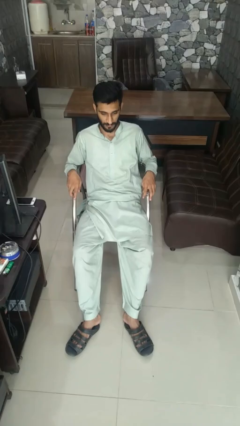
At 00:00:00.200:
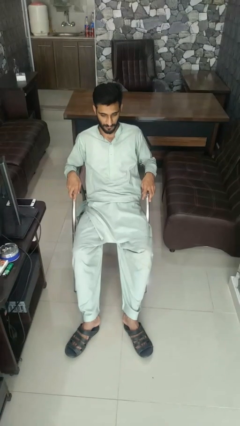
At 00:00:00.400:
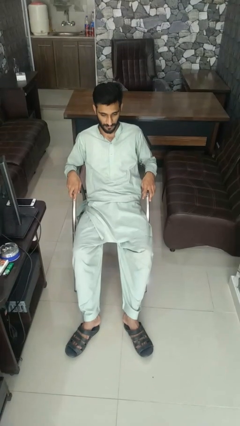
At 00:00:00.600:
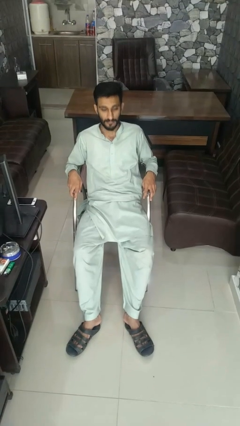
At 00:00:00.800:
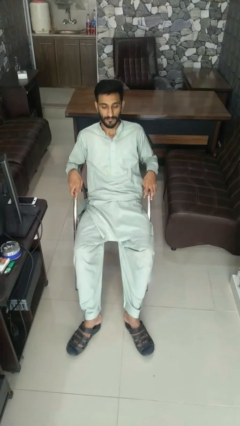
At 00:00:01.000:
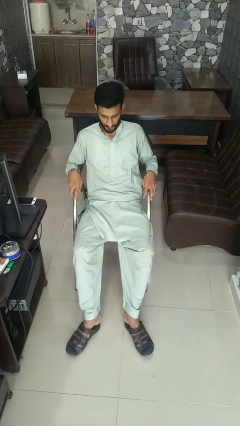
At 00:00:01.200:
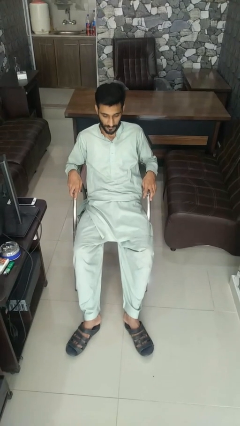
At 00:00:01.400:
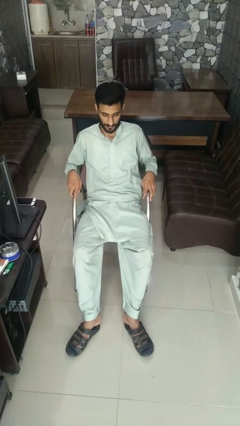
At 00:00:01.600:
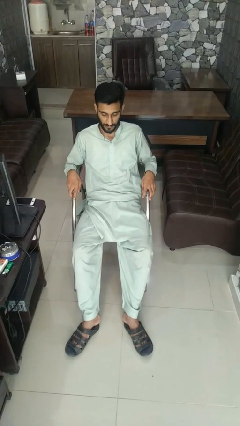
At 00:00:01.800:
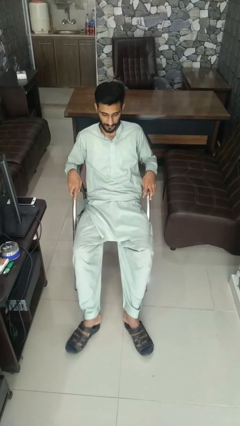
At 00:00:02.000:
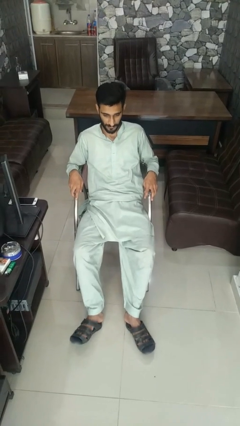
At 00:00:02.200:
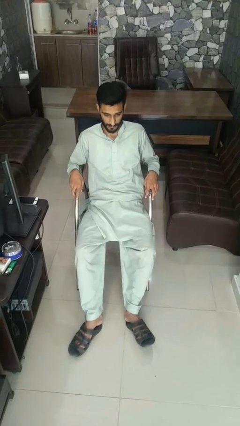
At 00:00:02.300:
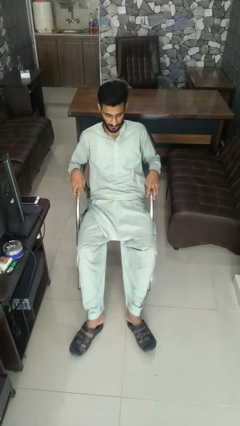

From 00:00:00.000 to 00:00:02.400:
person nods head

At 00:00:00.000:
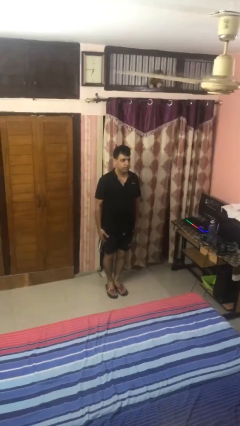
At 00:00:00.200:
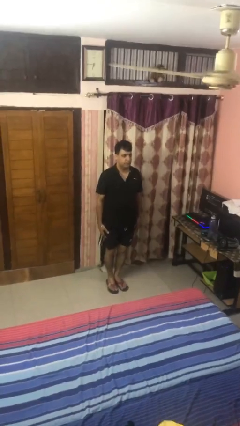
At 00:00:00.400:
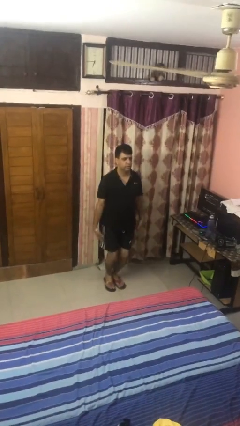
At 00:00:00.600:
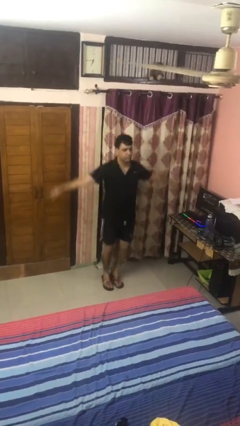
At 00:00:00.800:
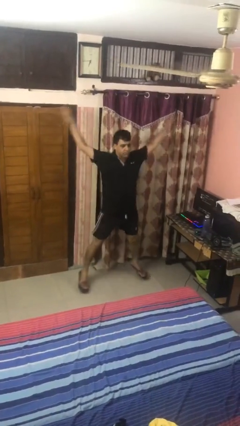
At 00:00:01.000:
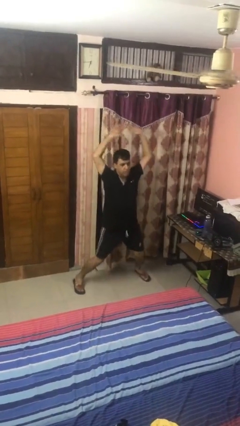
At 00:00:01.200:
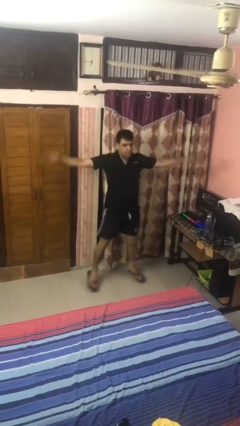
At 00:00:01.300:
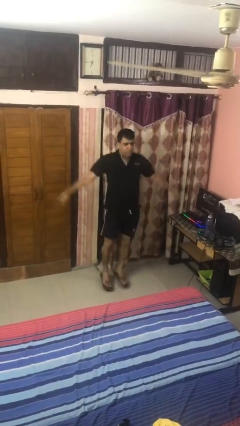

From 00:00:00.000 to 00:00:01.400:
person exercises with jumping jacks

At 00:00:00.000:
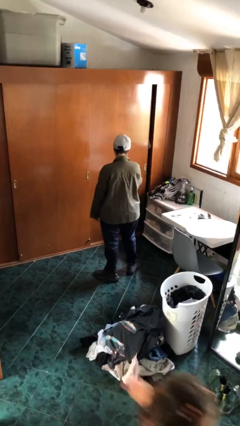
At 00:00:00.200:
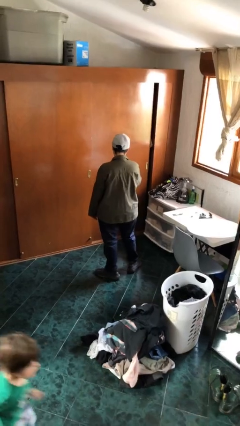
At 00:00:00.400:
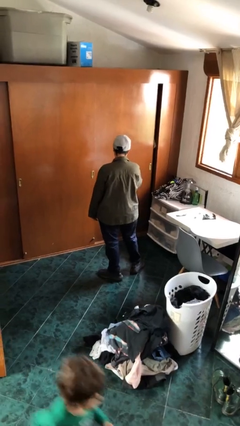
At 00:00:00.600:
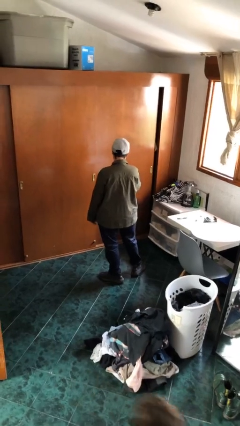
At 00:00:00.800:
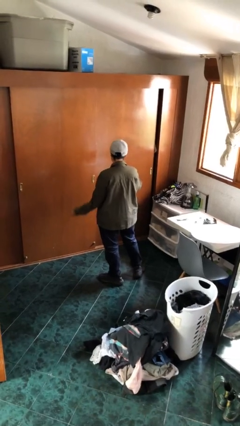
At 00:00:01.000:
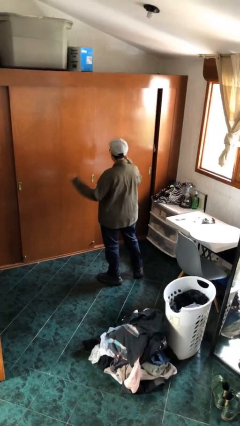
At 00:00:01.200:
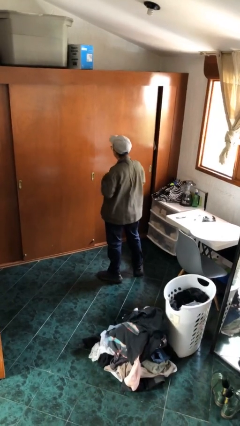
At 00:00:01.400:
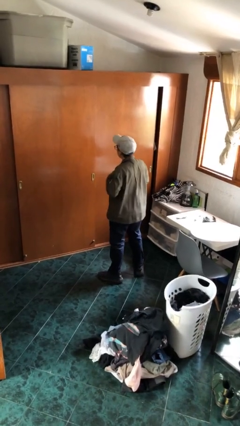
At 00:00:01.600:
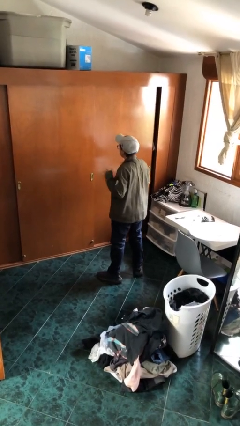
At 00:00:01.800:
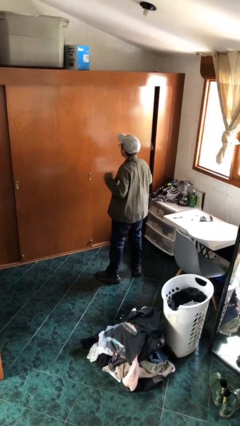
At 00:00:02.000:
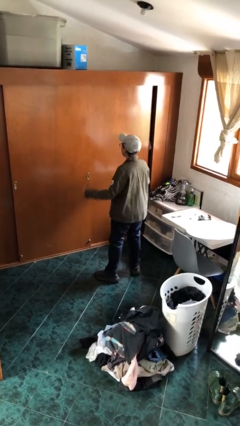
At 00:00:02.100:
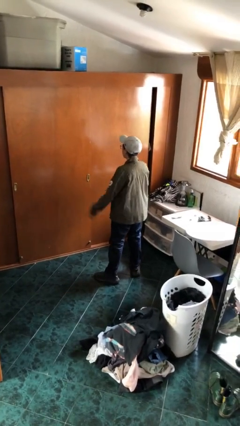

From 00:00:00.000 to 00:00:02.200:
person drums on chest

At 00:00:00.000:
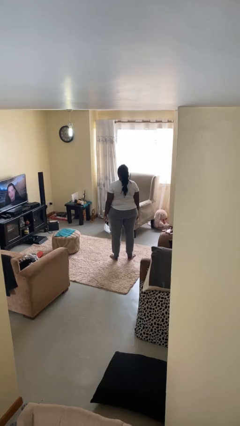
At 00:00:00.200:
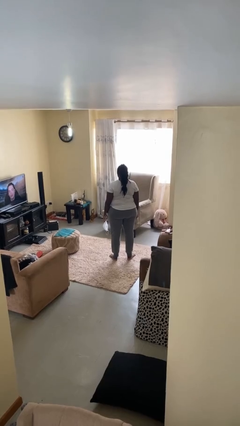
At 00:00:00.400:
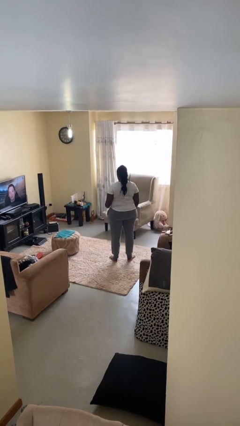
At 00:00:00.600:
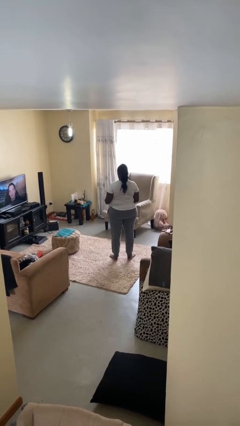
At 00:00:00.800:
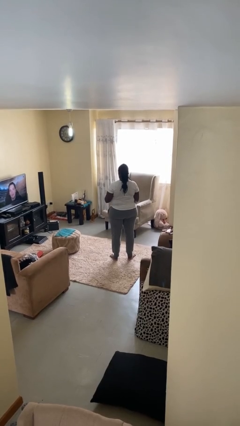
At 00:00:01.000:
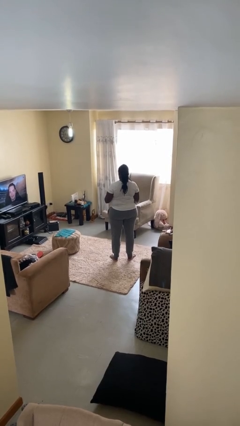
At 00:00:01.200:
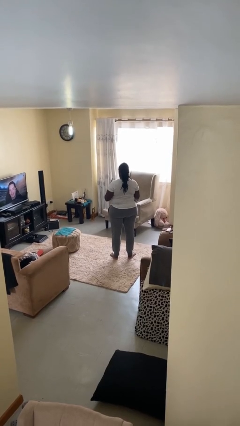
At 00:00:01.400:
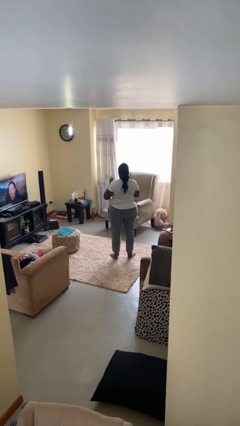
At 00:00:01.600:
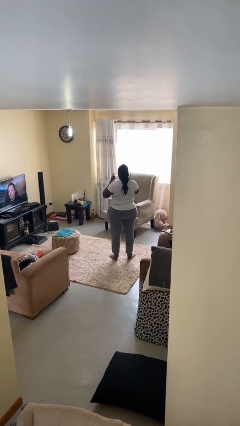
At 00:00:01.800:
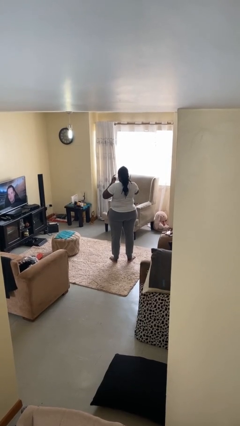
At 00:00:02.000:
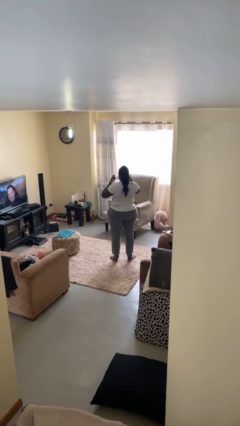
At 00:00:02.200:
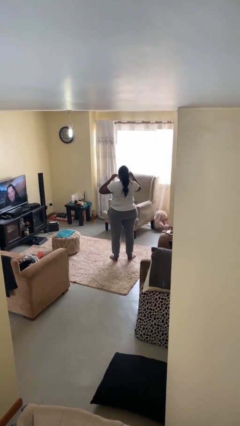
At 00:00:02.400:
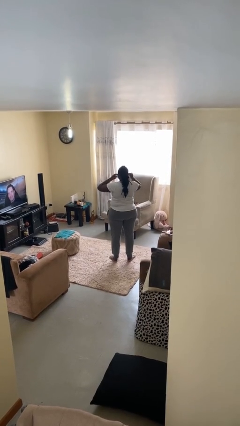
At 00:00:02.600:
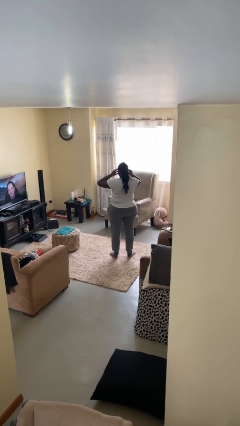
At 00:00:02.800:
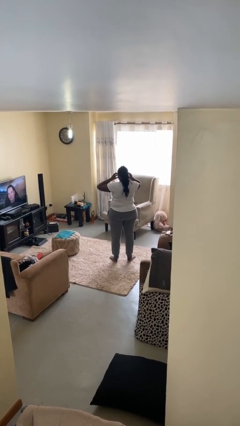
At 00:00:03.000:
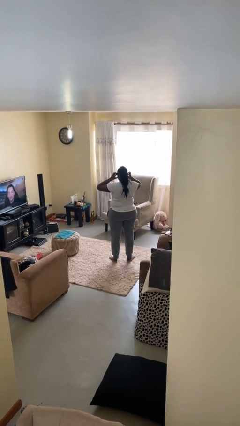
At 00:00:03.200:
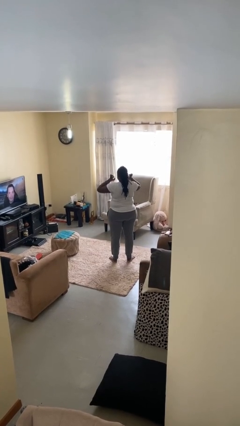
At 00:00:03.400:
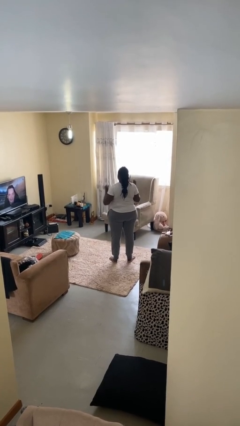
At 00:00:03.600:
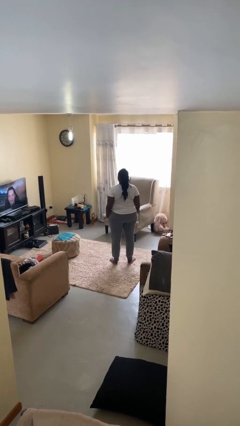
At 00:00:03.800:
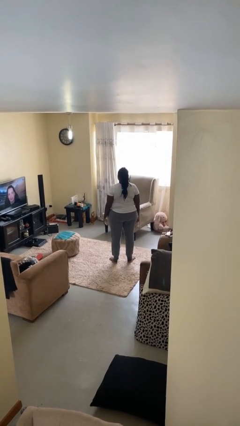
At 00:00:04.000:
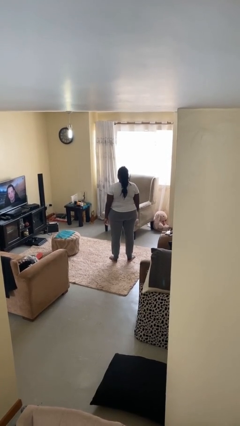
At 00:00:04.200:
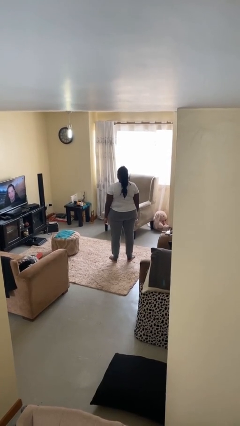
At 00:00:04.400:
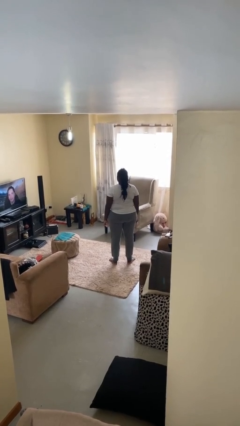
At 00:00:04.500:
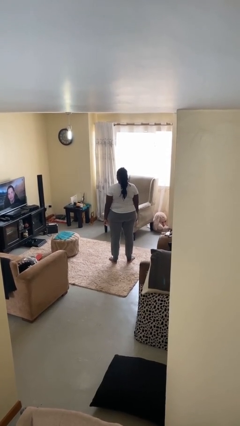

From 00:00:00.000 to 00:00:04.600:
person puts on facemask

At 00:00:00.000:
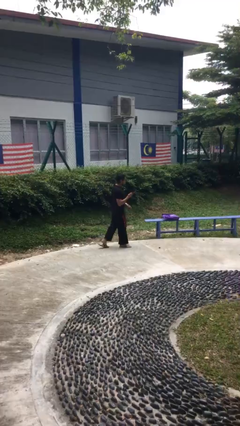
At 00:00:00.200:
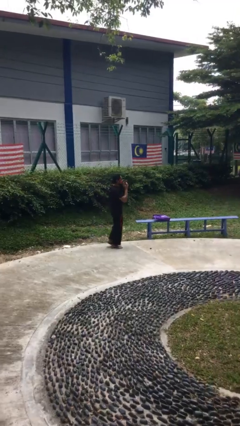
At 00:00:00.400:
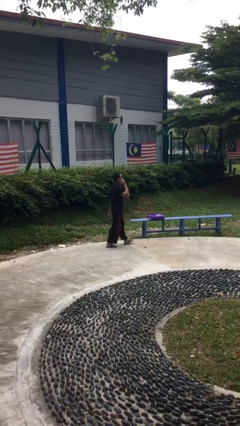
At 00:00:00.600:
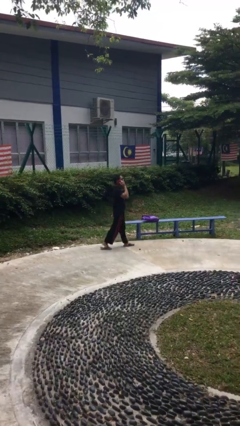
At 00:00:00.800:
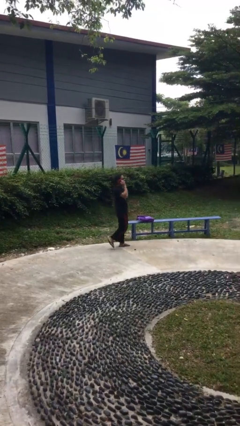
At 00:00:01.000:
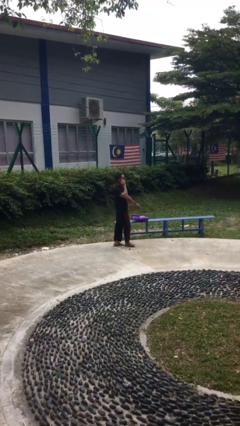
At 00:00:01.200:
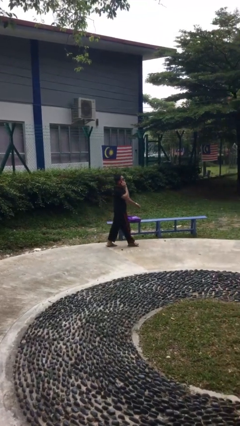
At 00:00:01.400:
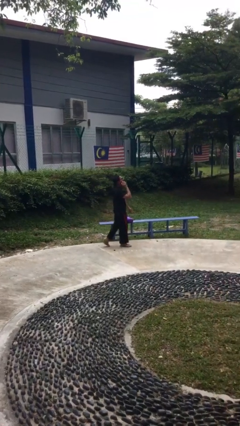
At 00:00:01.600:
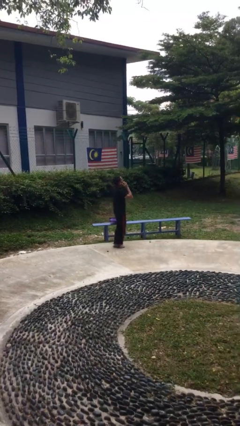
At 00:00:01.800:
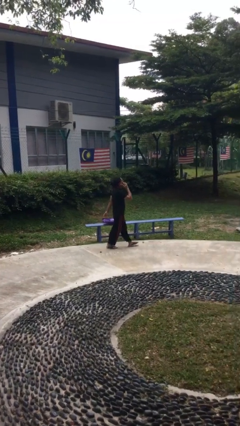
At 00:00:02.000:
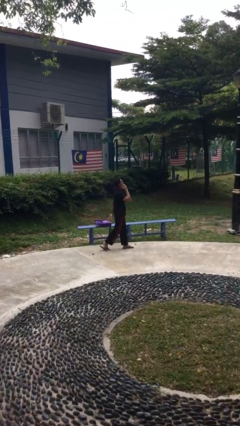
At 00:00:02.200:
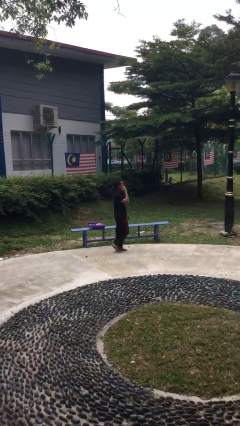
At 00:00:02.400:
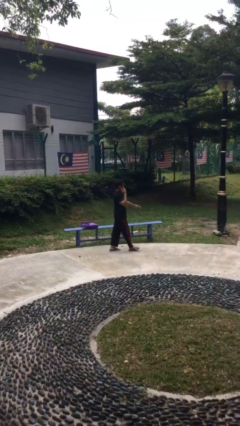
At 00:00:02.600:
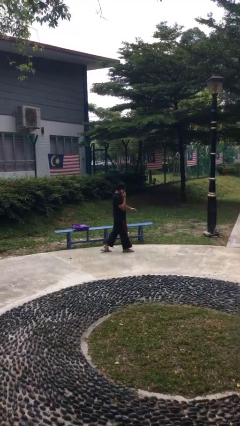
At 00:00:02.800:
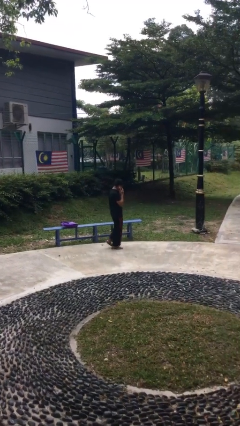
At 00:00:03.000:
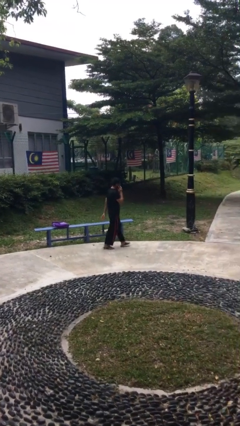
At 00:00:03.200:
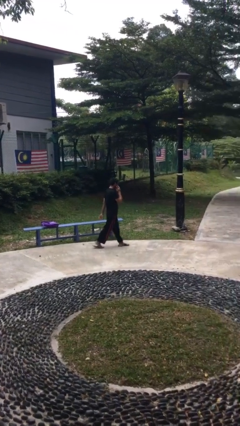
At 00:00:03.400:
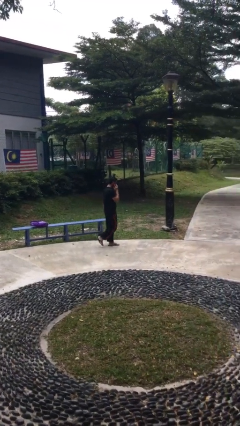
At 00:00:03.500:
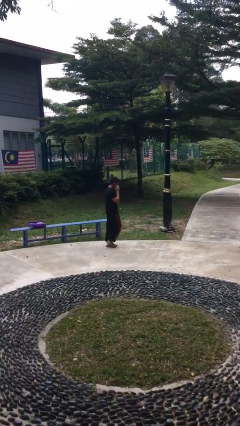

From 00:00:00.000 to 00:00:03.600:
person talks on phone

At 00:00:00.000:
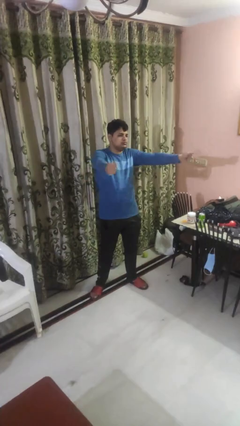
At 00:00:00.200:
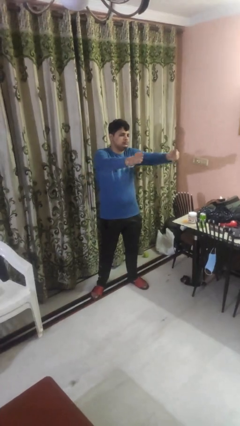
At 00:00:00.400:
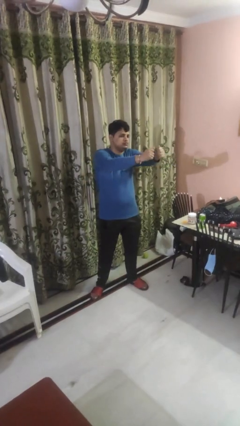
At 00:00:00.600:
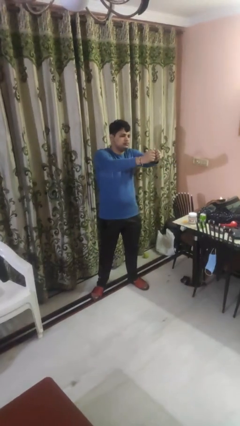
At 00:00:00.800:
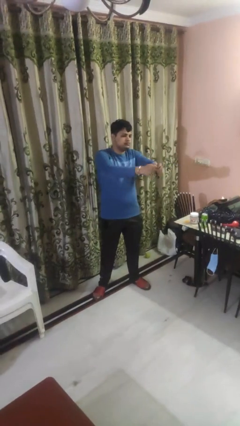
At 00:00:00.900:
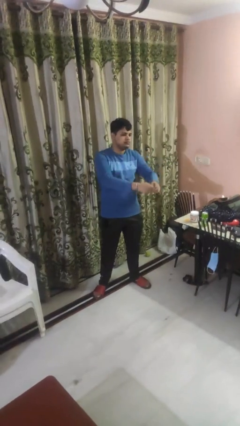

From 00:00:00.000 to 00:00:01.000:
person gestures zoom out

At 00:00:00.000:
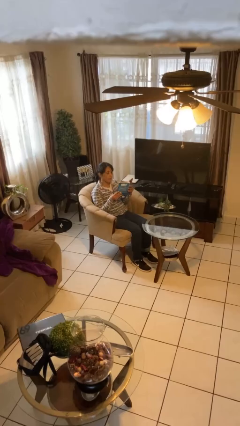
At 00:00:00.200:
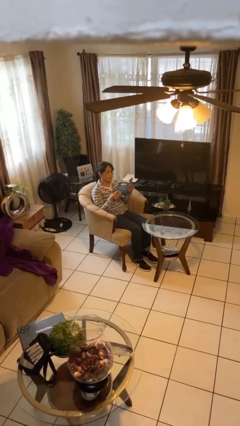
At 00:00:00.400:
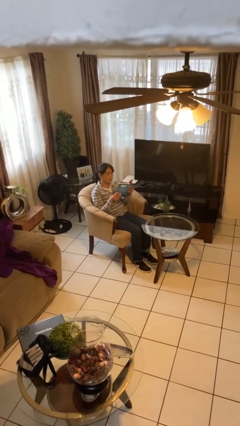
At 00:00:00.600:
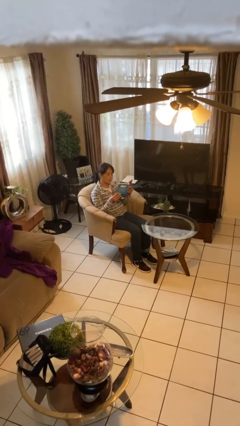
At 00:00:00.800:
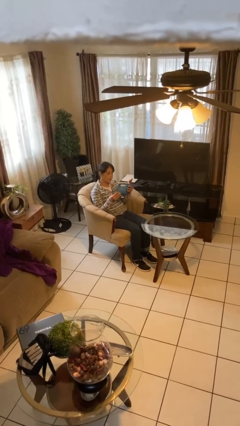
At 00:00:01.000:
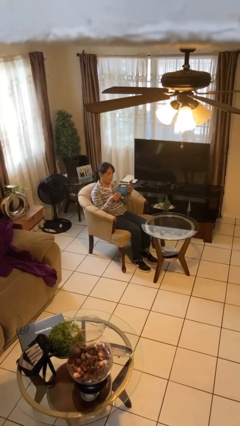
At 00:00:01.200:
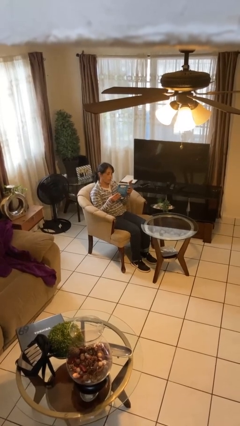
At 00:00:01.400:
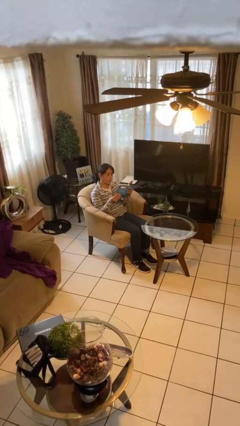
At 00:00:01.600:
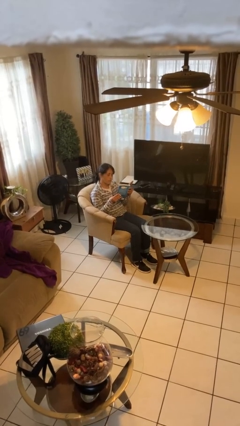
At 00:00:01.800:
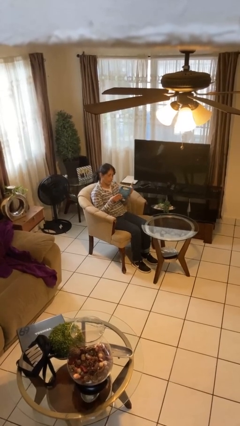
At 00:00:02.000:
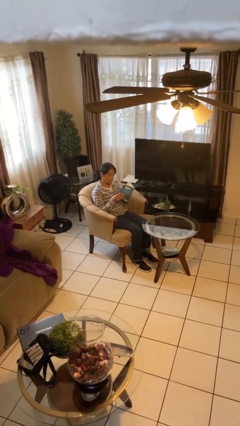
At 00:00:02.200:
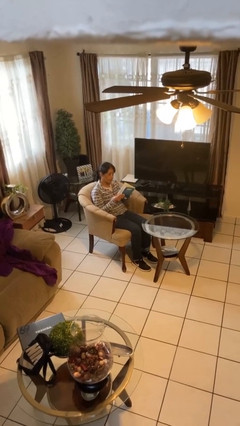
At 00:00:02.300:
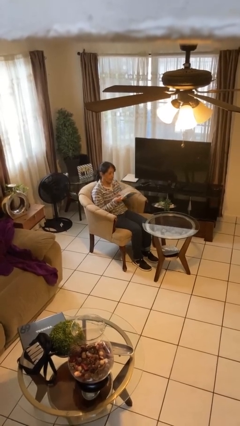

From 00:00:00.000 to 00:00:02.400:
person reads document
